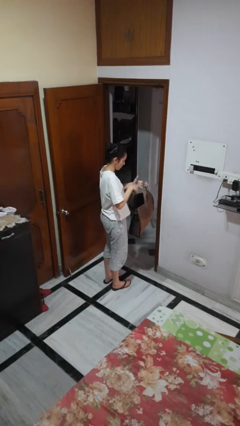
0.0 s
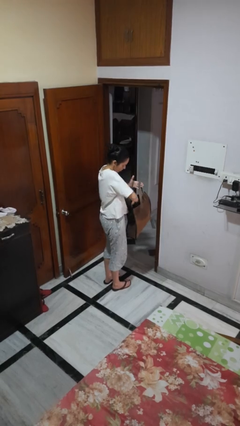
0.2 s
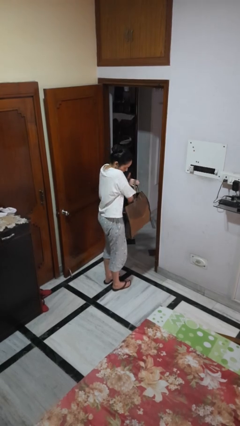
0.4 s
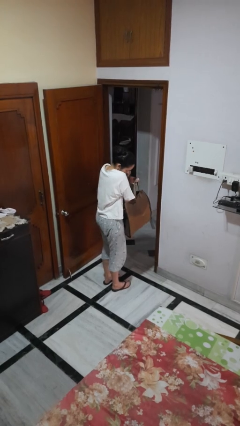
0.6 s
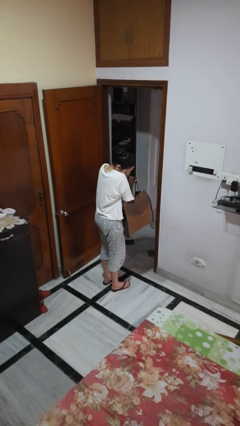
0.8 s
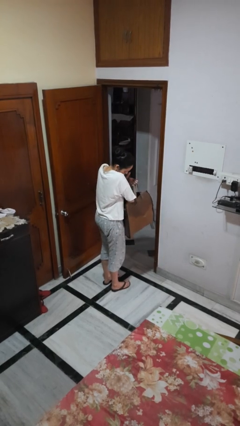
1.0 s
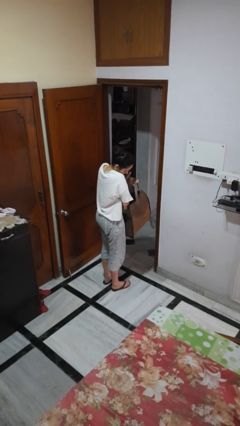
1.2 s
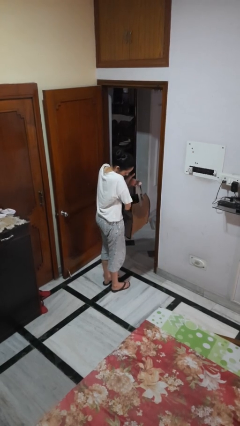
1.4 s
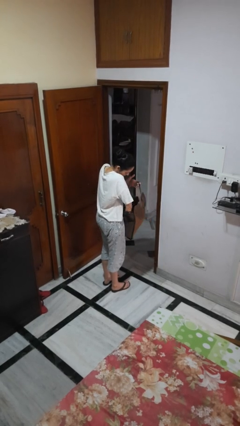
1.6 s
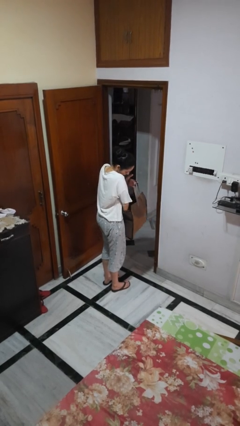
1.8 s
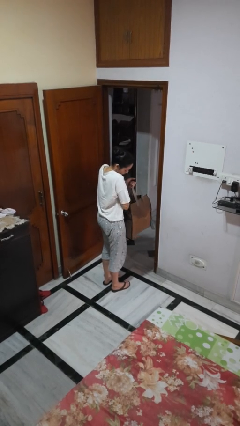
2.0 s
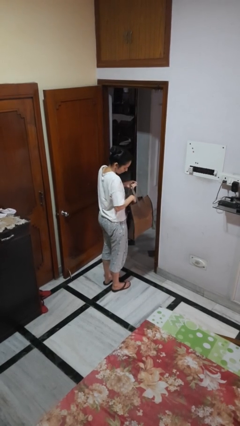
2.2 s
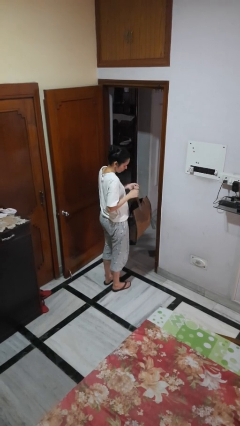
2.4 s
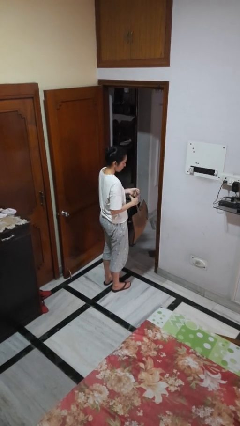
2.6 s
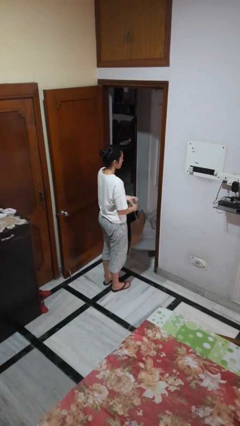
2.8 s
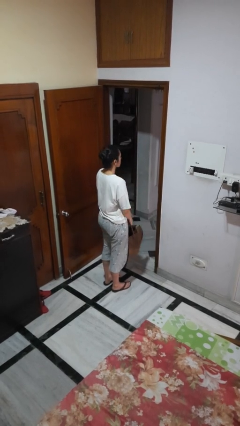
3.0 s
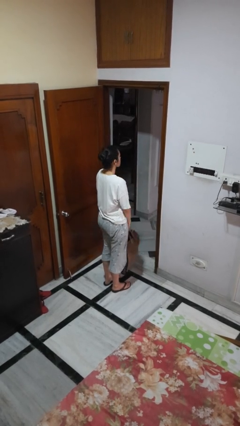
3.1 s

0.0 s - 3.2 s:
person searches in bag

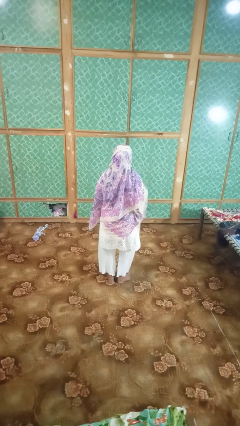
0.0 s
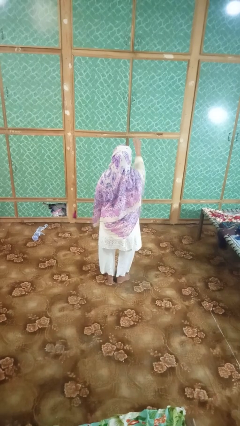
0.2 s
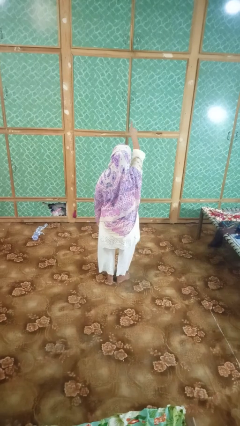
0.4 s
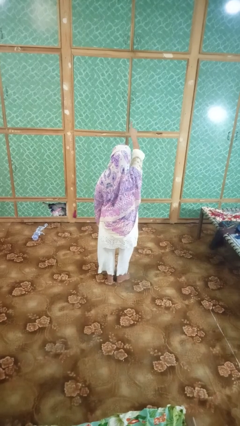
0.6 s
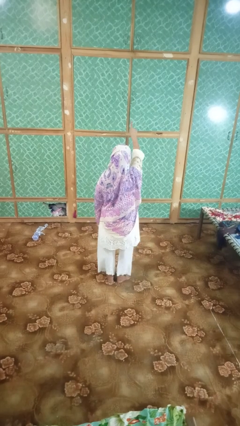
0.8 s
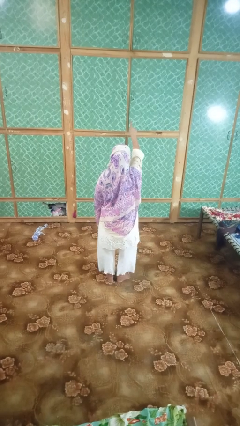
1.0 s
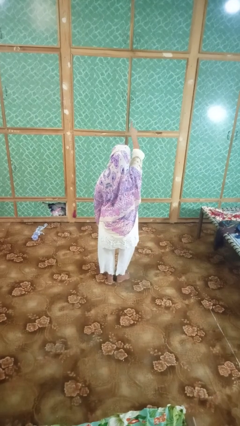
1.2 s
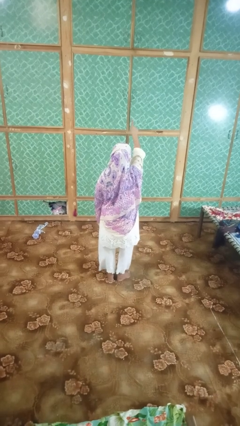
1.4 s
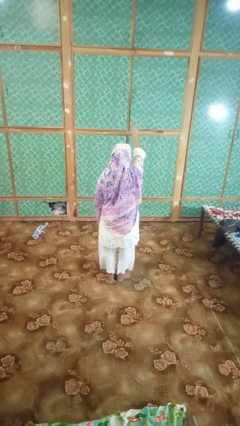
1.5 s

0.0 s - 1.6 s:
person gestures number one

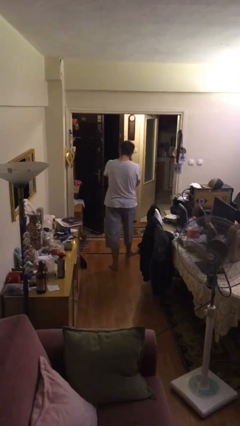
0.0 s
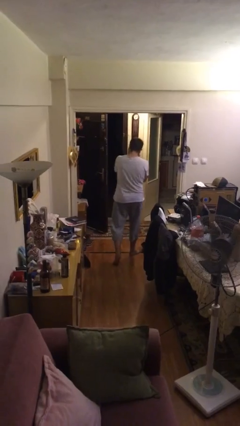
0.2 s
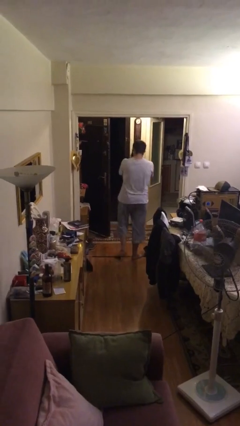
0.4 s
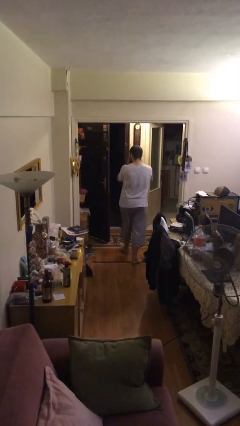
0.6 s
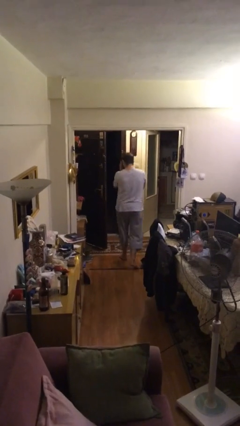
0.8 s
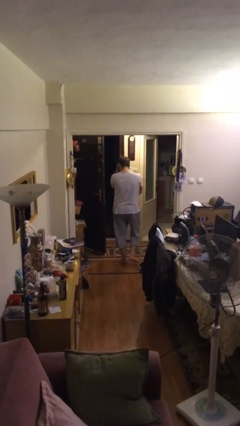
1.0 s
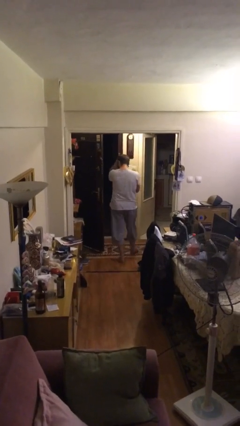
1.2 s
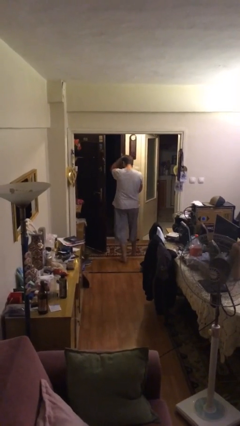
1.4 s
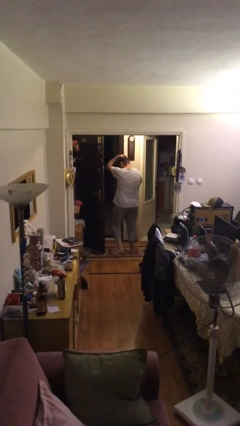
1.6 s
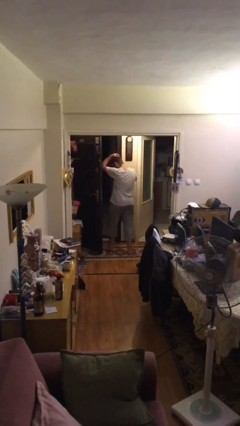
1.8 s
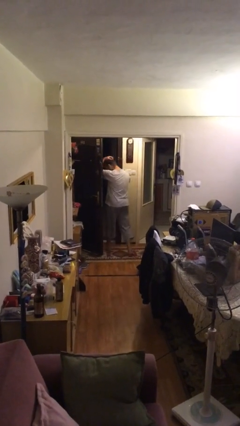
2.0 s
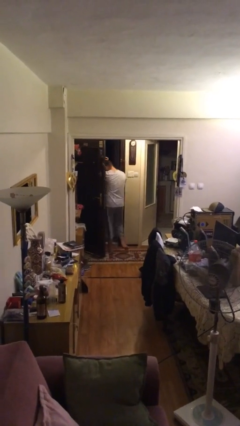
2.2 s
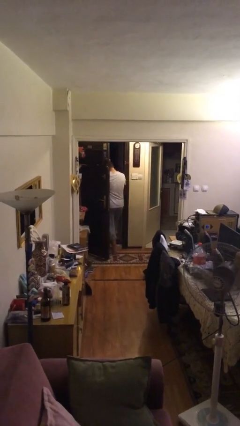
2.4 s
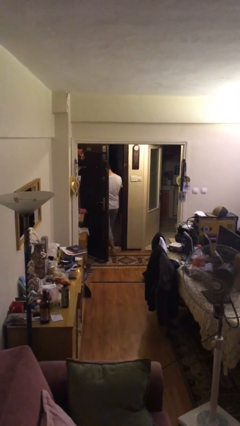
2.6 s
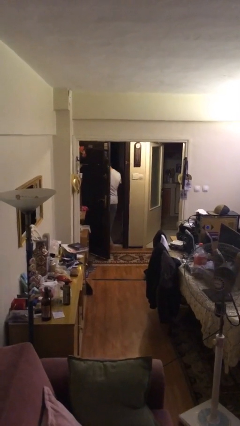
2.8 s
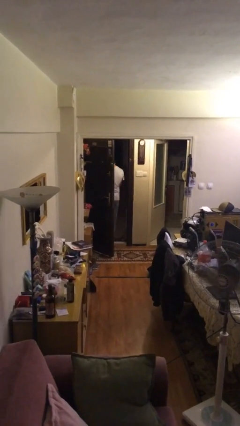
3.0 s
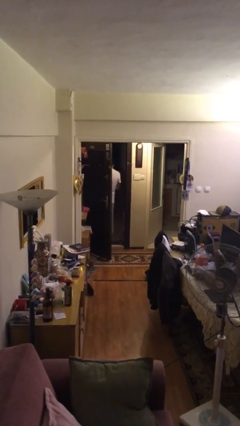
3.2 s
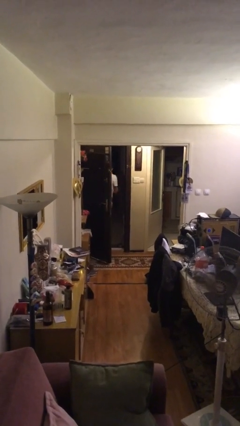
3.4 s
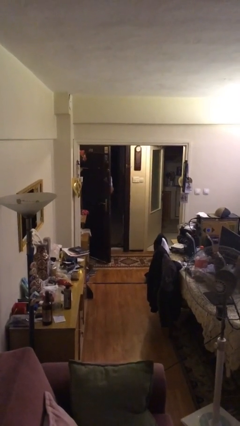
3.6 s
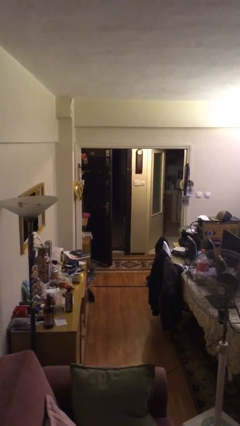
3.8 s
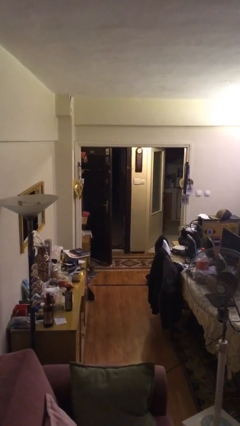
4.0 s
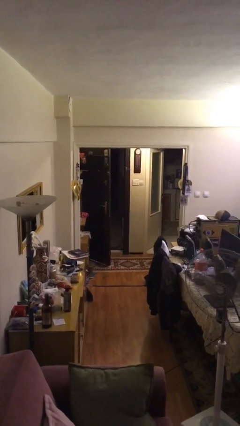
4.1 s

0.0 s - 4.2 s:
person exits scene through structure

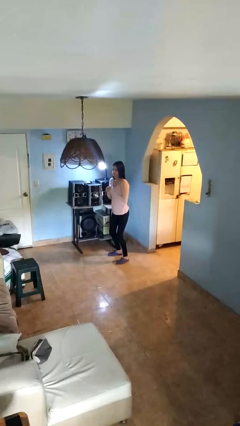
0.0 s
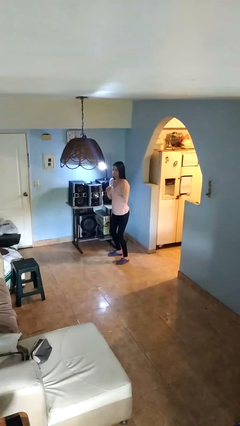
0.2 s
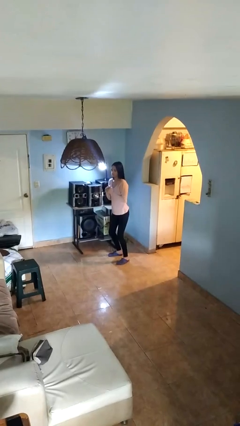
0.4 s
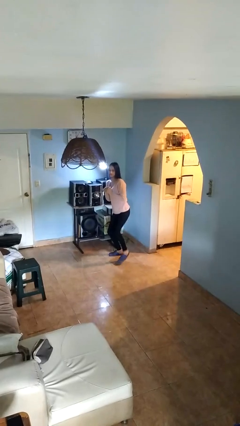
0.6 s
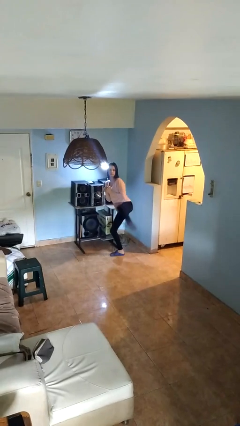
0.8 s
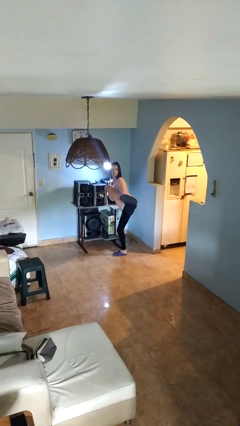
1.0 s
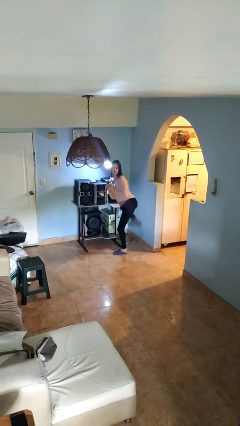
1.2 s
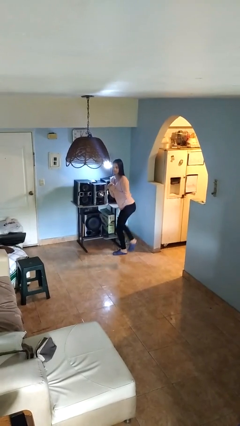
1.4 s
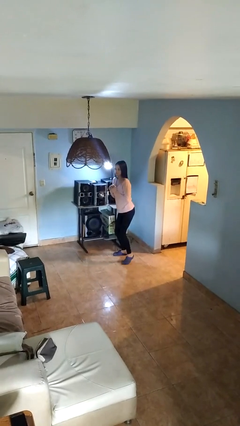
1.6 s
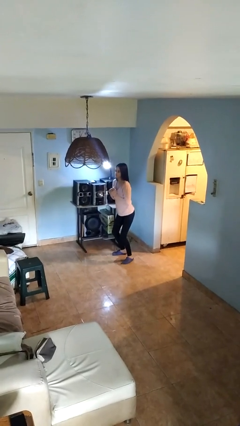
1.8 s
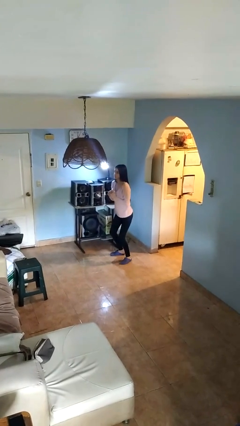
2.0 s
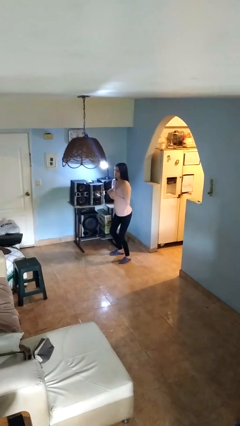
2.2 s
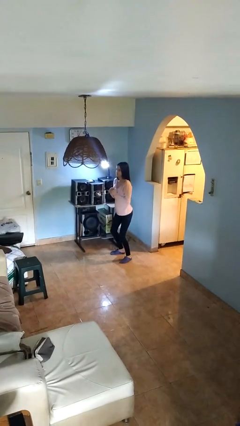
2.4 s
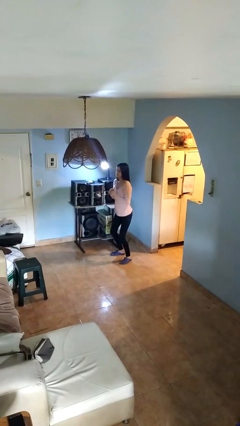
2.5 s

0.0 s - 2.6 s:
person karate kicks

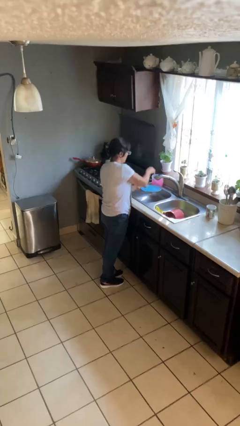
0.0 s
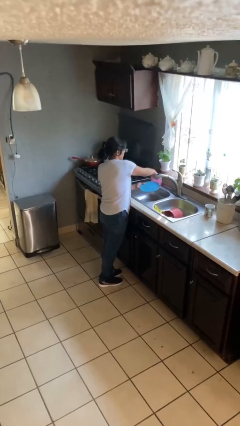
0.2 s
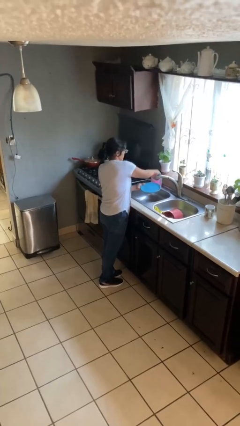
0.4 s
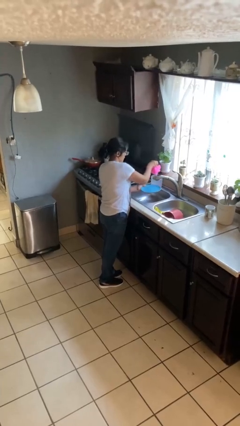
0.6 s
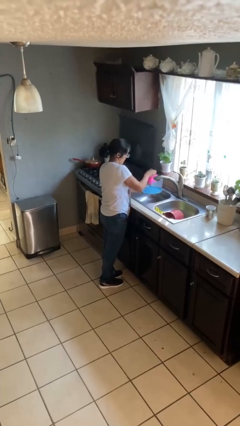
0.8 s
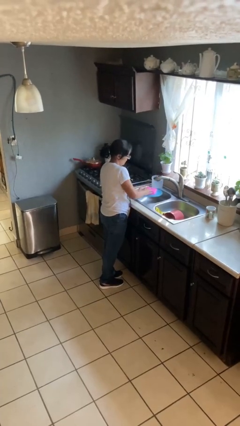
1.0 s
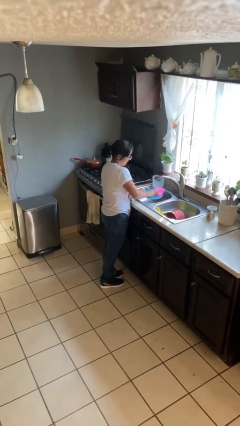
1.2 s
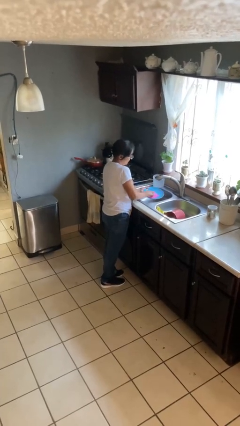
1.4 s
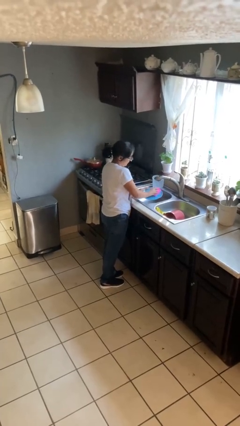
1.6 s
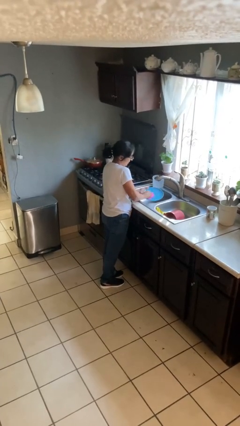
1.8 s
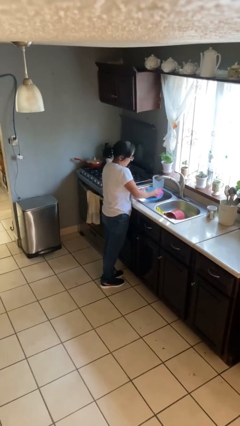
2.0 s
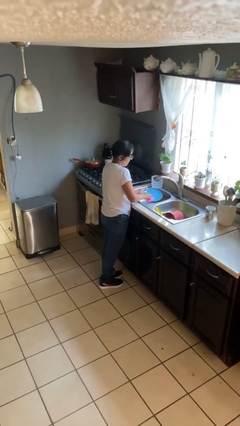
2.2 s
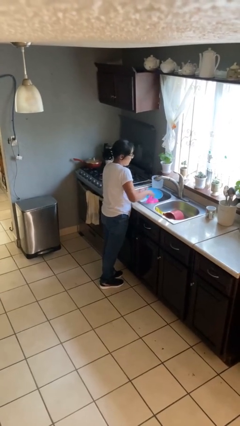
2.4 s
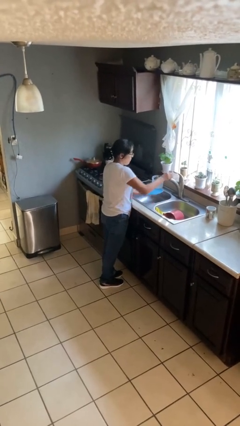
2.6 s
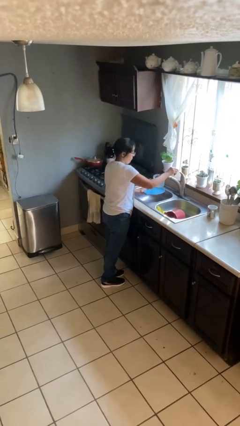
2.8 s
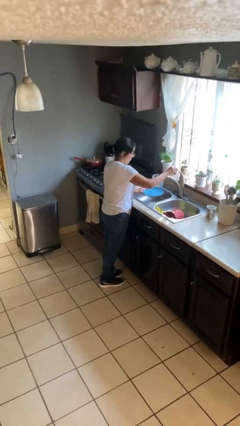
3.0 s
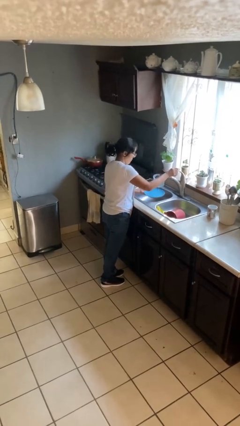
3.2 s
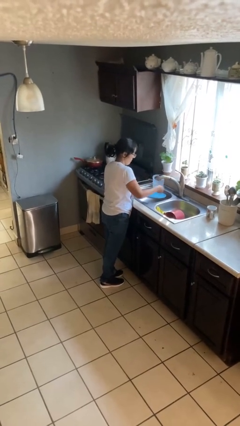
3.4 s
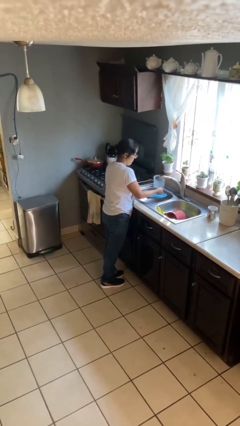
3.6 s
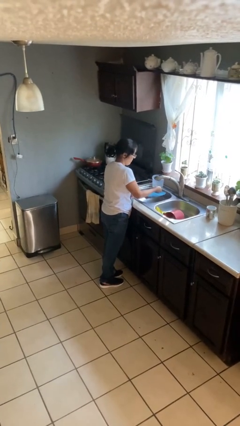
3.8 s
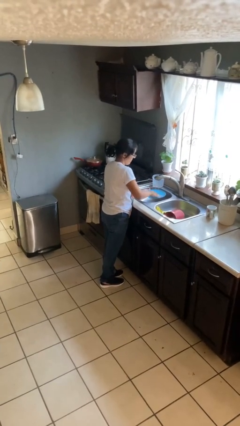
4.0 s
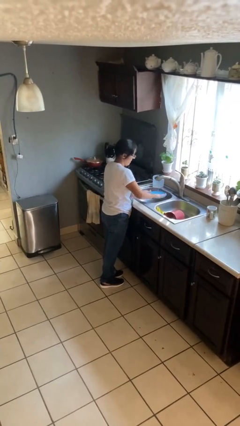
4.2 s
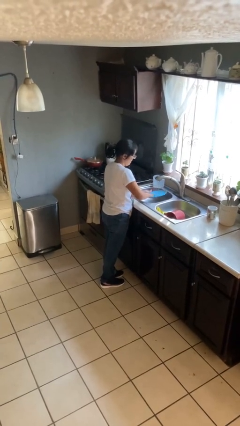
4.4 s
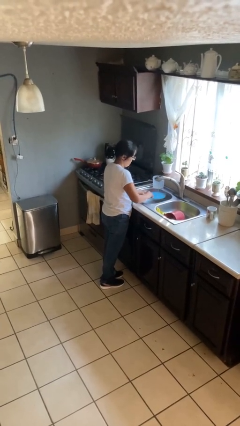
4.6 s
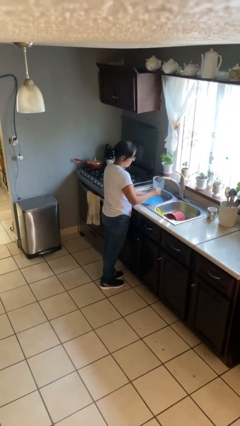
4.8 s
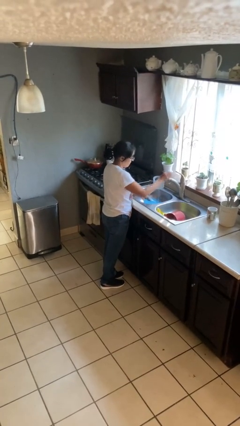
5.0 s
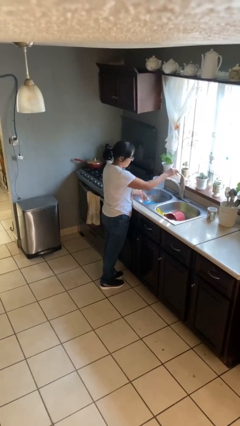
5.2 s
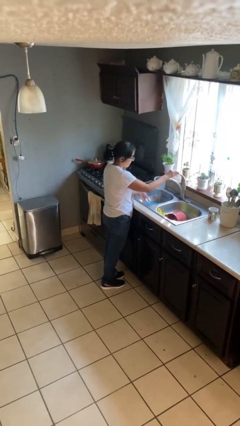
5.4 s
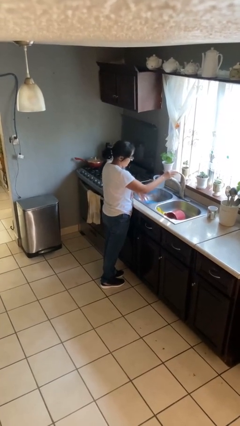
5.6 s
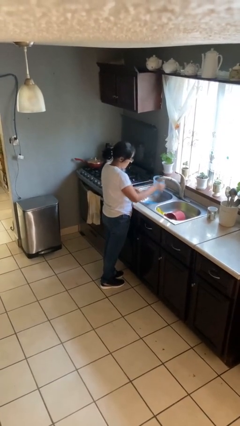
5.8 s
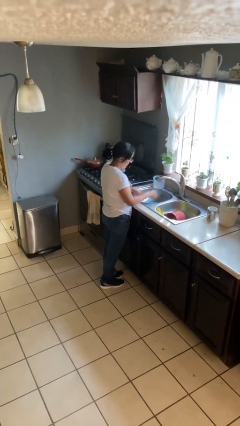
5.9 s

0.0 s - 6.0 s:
person washes dish
